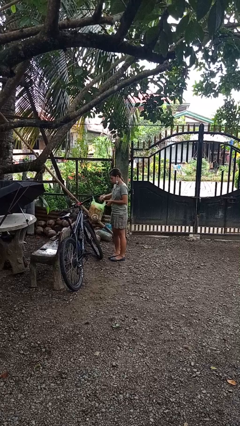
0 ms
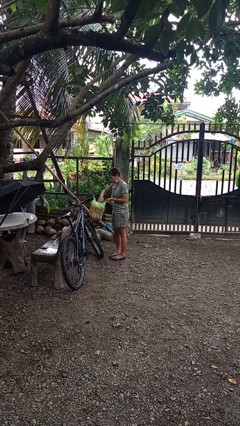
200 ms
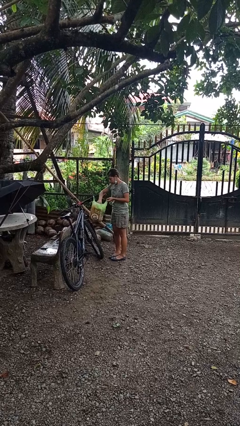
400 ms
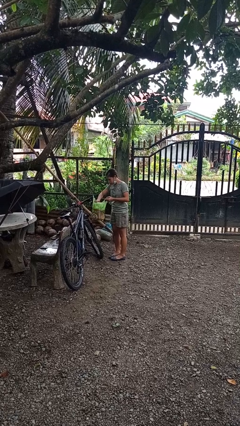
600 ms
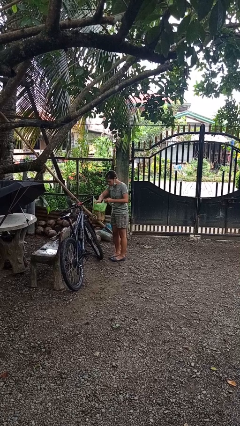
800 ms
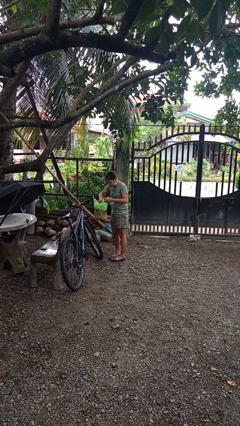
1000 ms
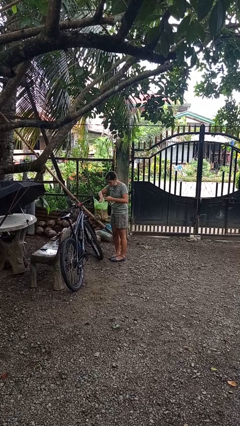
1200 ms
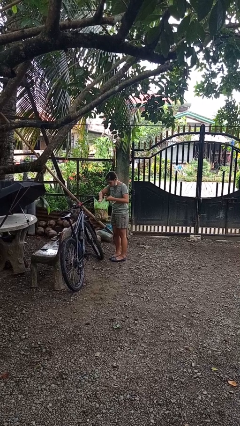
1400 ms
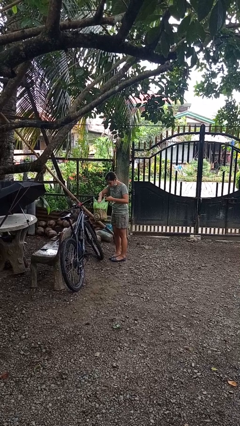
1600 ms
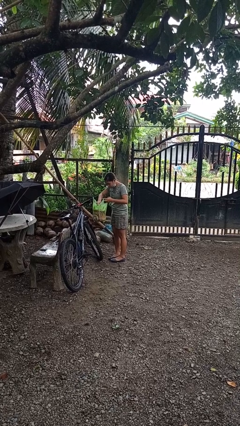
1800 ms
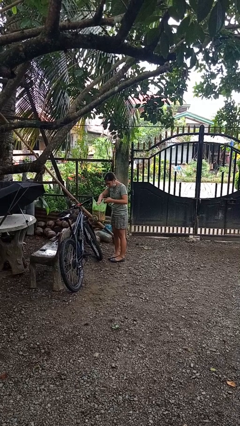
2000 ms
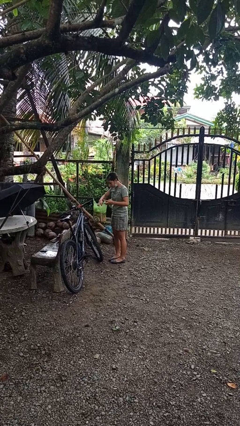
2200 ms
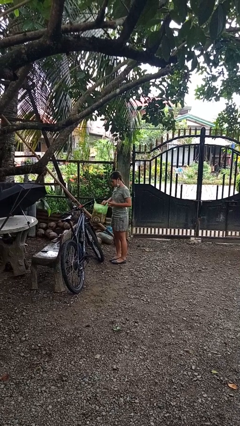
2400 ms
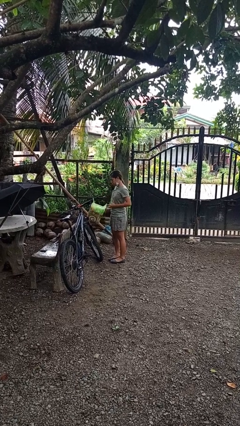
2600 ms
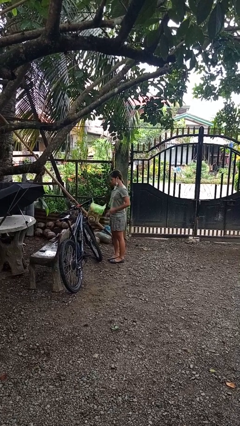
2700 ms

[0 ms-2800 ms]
person searches in bag

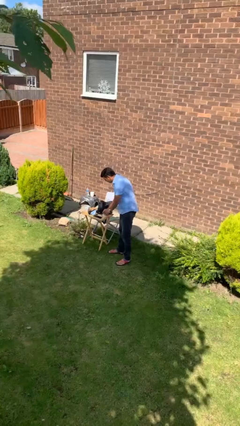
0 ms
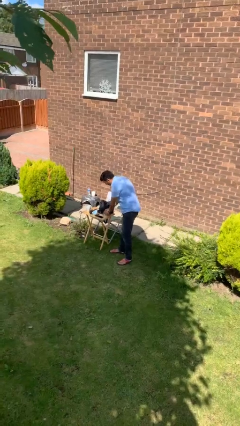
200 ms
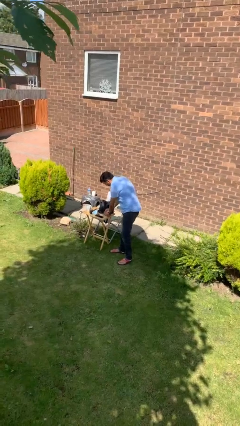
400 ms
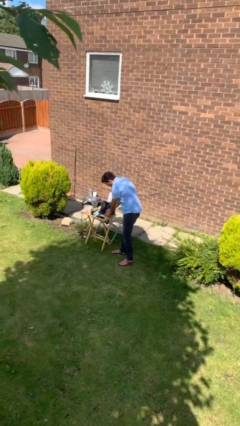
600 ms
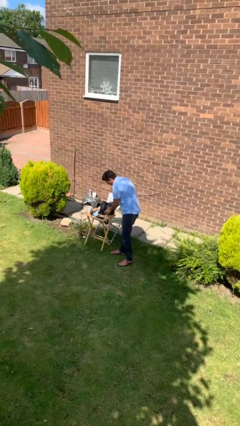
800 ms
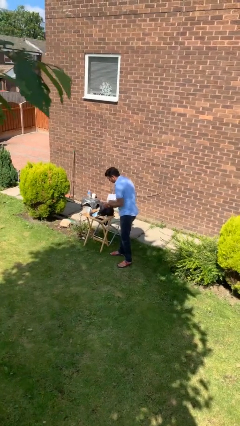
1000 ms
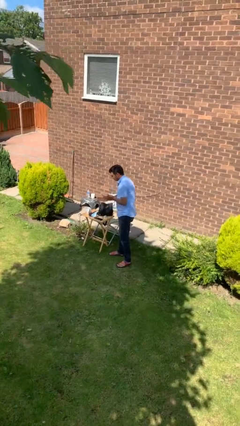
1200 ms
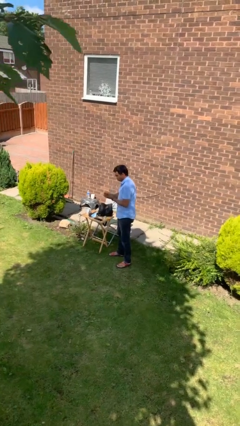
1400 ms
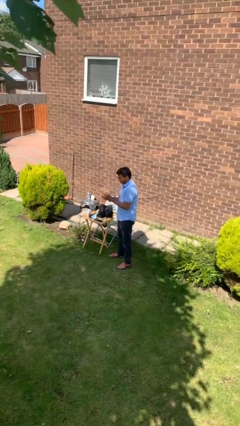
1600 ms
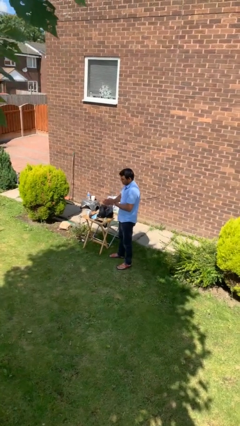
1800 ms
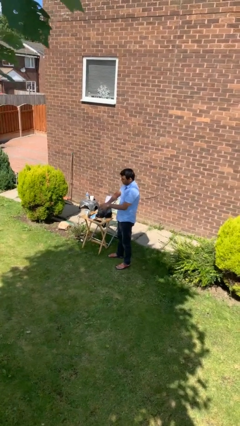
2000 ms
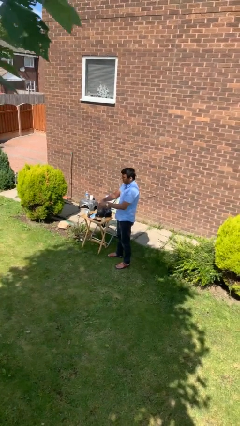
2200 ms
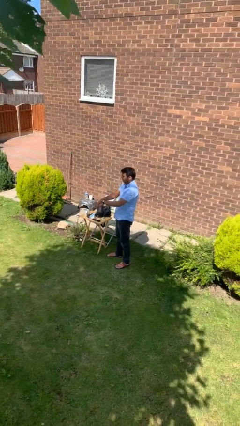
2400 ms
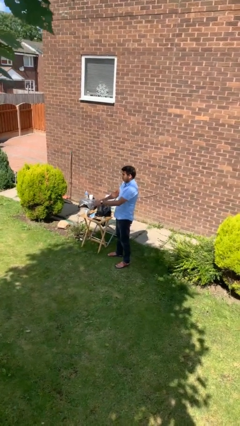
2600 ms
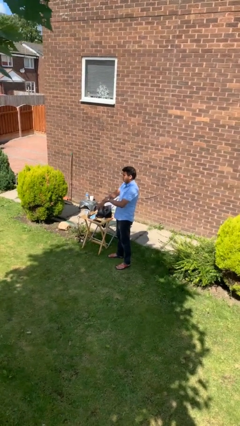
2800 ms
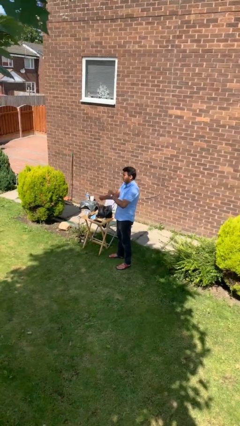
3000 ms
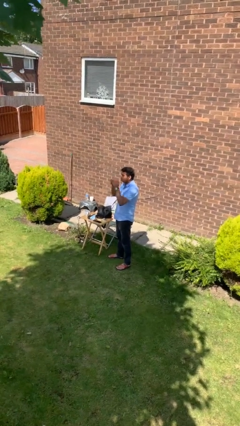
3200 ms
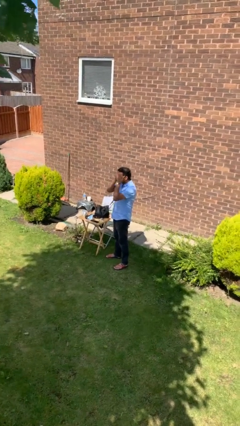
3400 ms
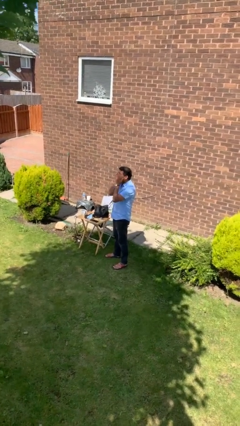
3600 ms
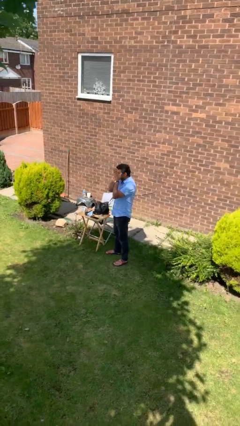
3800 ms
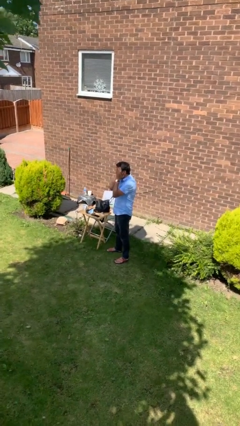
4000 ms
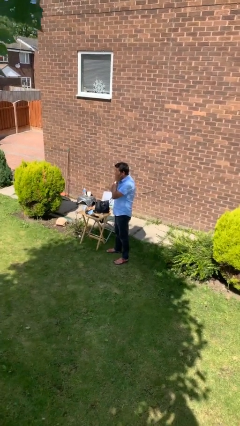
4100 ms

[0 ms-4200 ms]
person applies facial moisturizer

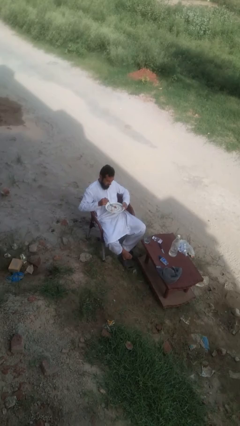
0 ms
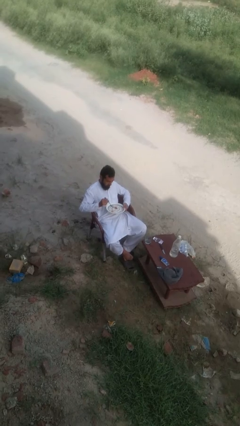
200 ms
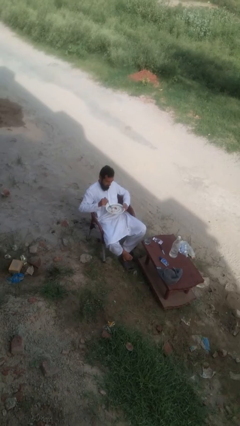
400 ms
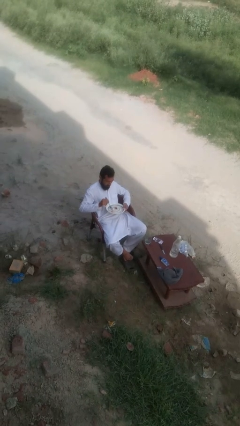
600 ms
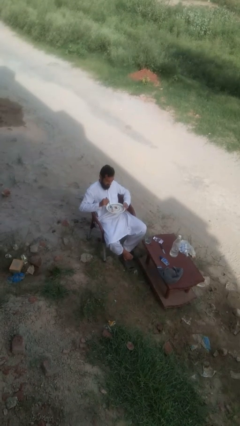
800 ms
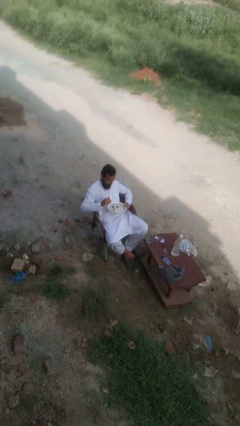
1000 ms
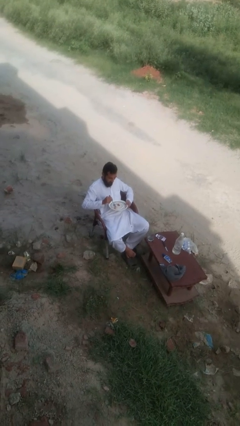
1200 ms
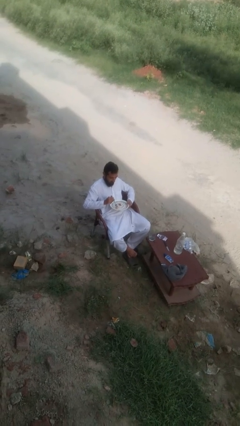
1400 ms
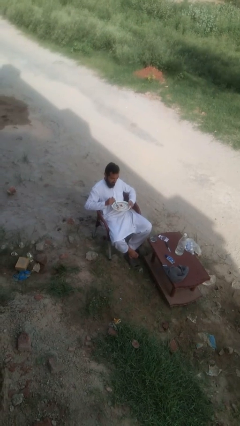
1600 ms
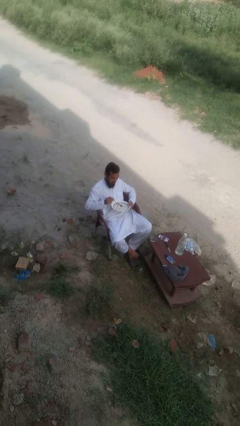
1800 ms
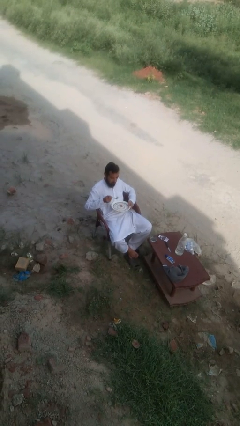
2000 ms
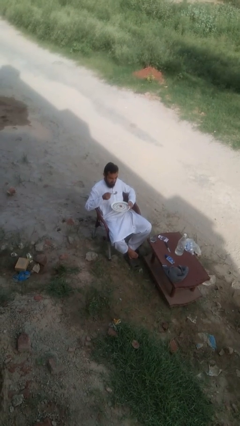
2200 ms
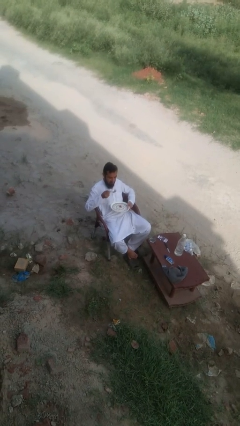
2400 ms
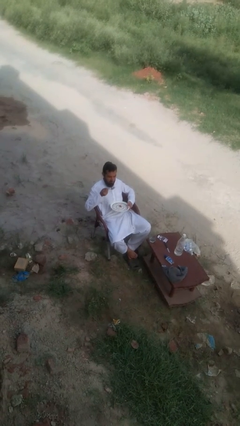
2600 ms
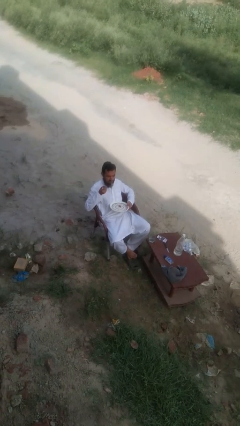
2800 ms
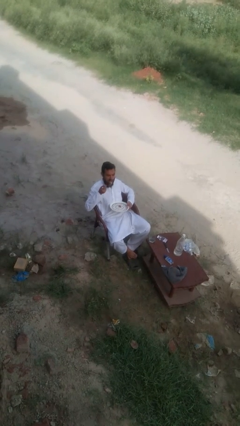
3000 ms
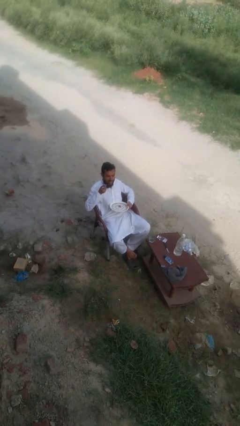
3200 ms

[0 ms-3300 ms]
person eats with utensil

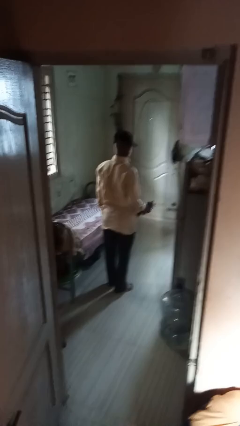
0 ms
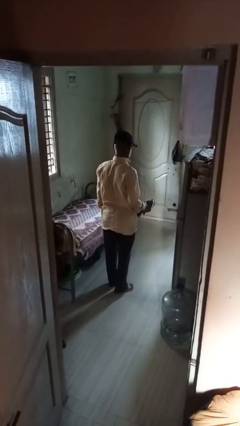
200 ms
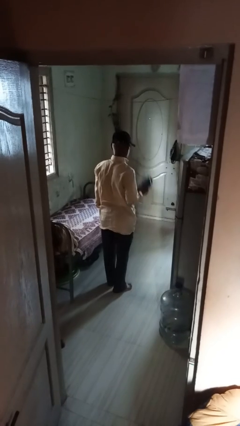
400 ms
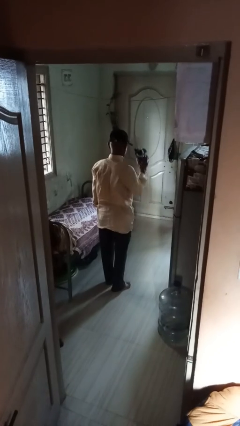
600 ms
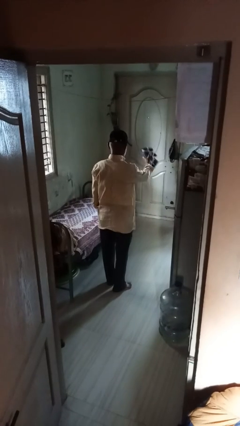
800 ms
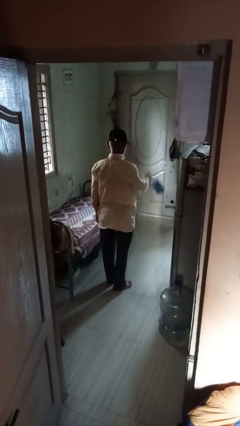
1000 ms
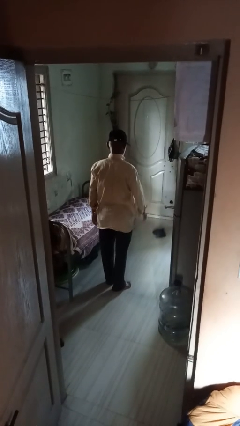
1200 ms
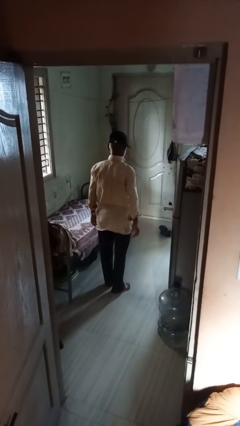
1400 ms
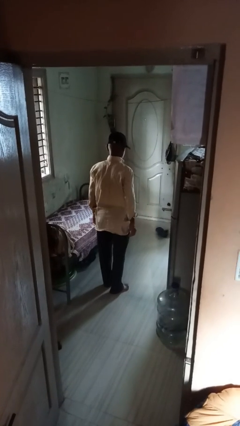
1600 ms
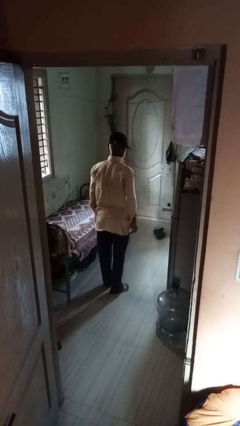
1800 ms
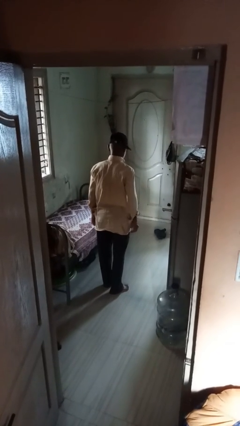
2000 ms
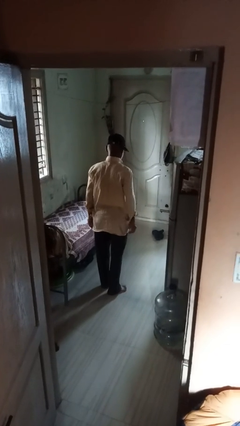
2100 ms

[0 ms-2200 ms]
person throws object to ground

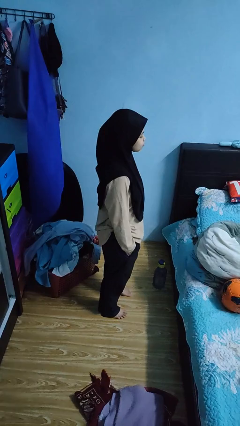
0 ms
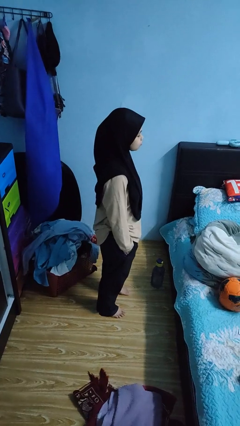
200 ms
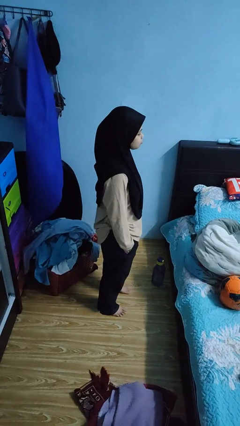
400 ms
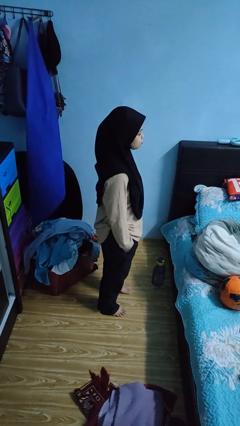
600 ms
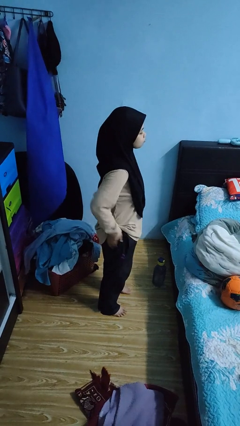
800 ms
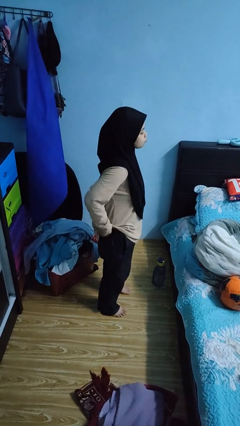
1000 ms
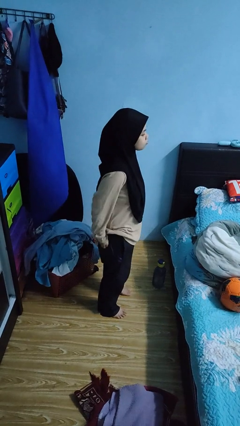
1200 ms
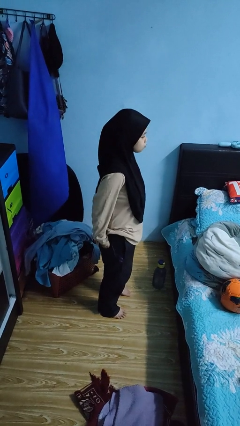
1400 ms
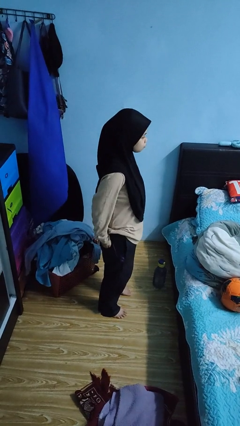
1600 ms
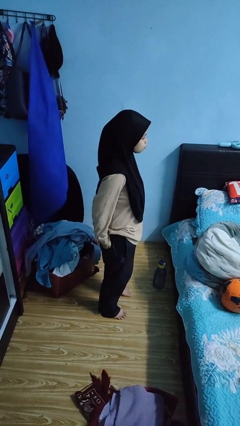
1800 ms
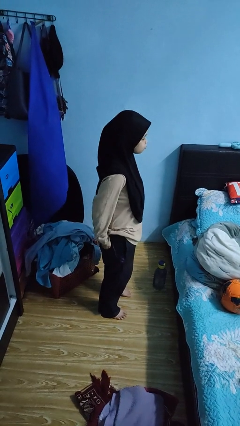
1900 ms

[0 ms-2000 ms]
person puts hands in back pockets

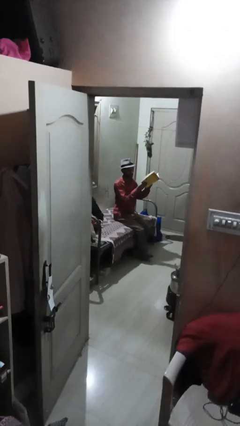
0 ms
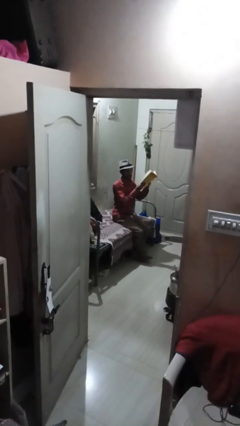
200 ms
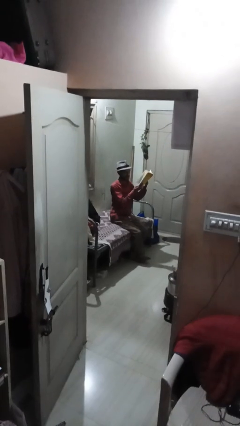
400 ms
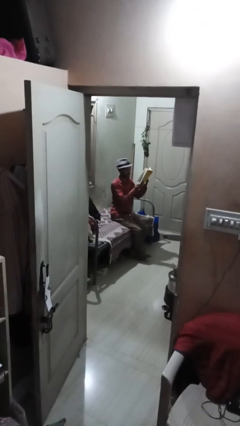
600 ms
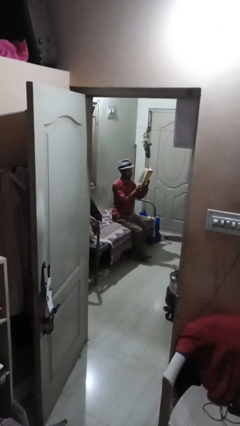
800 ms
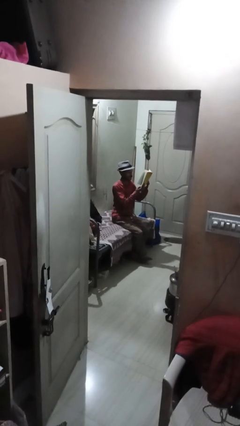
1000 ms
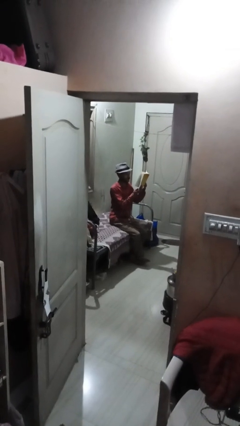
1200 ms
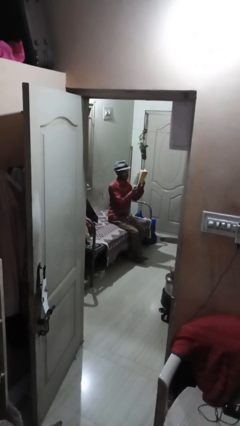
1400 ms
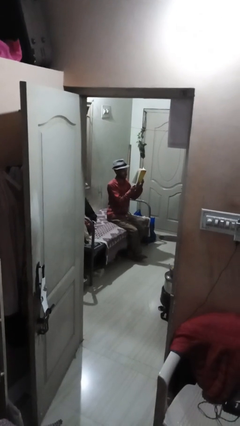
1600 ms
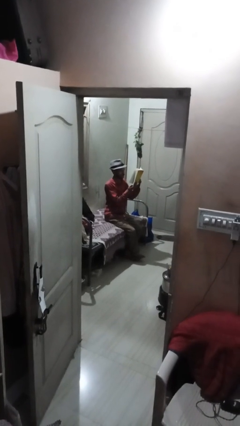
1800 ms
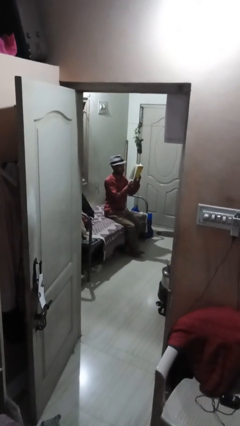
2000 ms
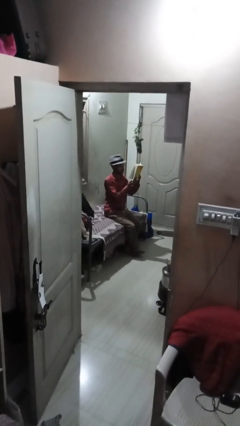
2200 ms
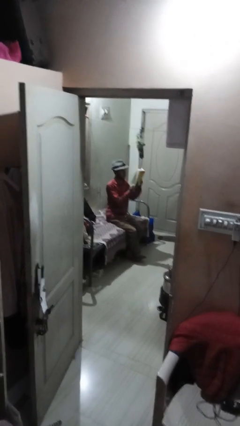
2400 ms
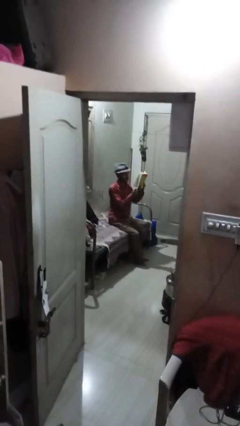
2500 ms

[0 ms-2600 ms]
person reads book

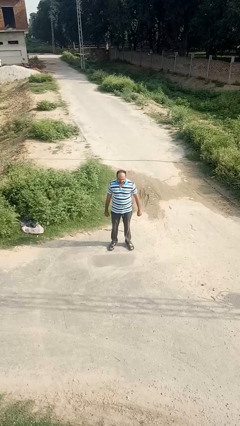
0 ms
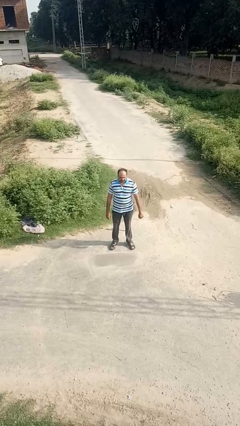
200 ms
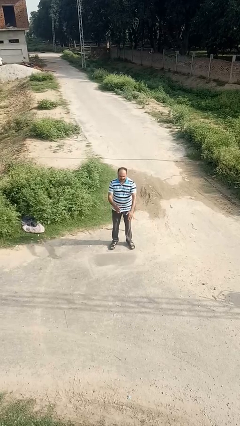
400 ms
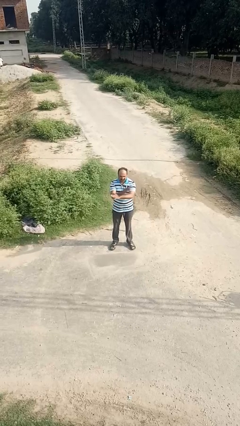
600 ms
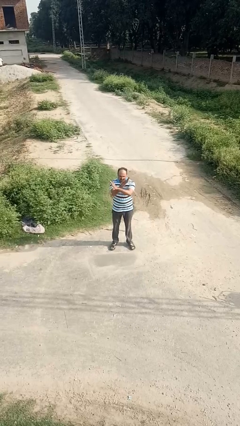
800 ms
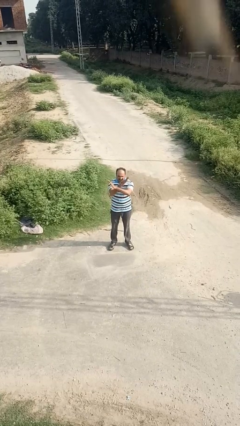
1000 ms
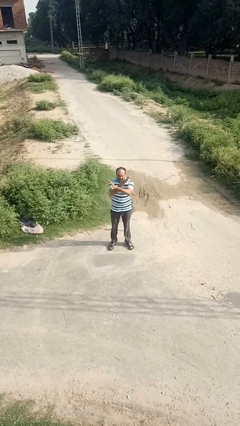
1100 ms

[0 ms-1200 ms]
person crosses arms
